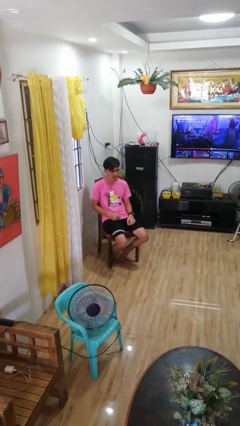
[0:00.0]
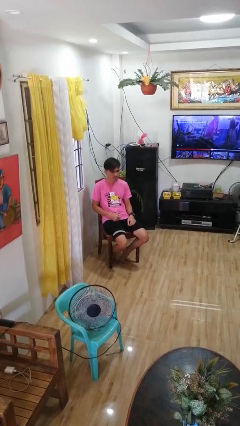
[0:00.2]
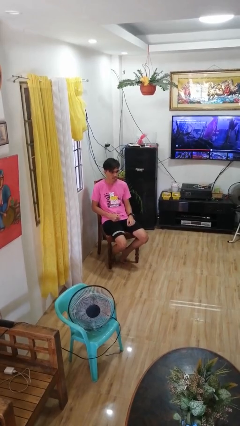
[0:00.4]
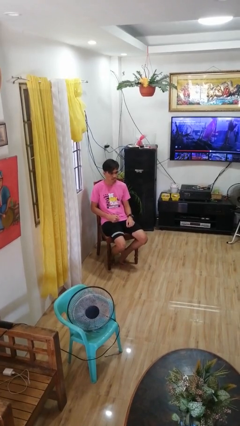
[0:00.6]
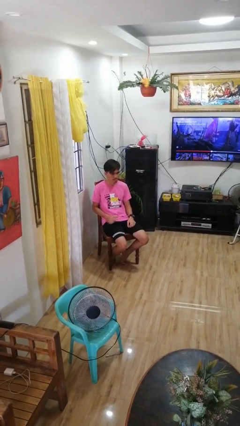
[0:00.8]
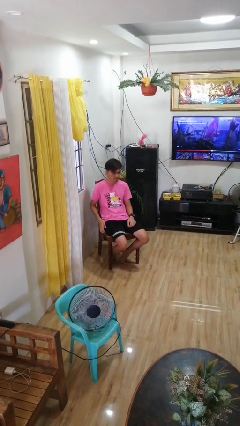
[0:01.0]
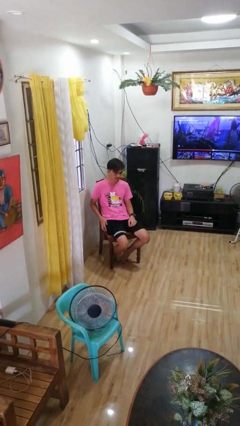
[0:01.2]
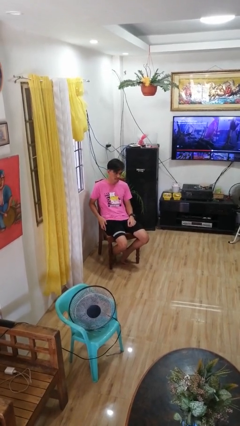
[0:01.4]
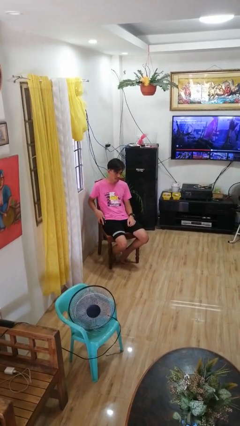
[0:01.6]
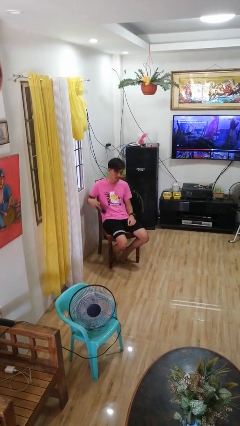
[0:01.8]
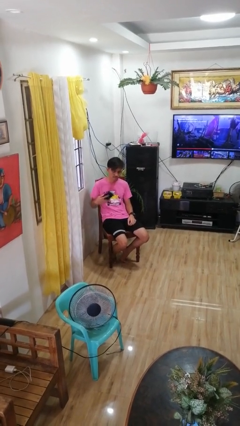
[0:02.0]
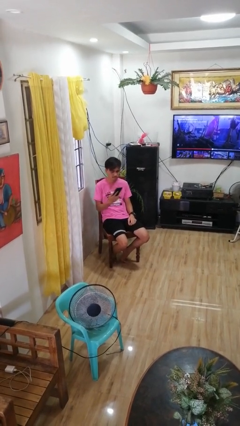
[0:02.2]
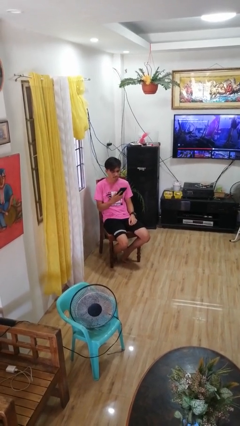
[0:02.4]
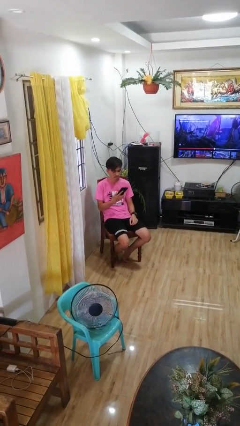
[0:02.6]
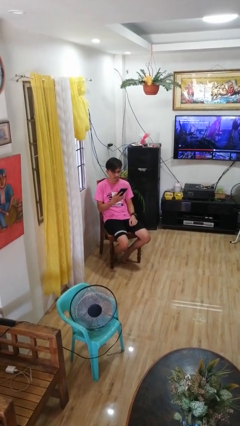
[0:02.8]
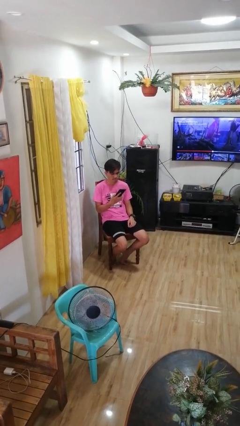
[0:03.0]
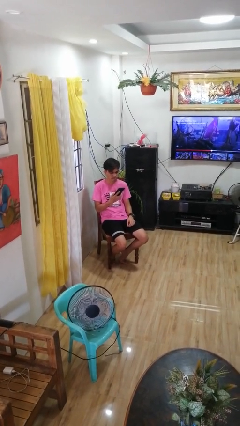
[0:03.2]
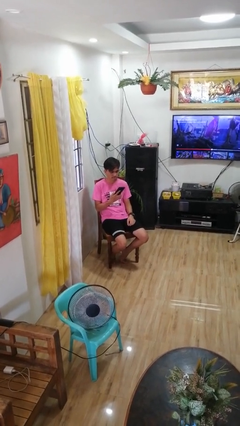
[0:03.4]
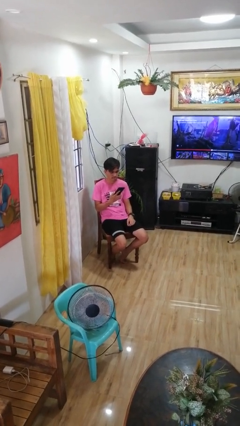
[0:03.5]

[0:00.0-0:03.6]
person takes phone from pocket

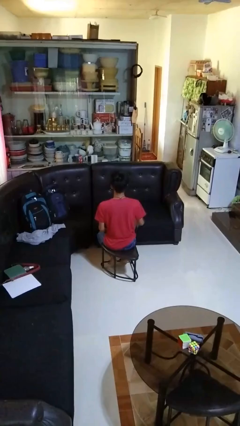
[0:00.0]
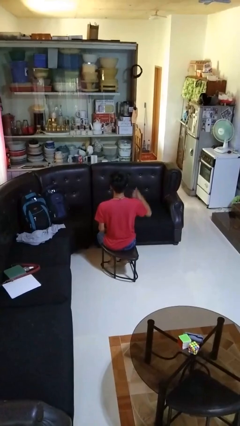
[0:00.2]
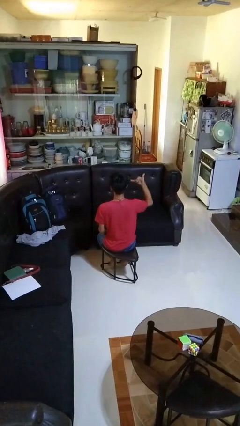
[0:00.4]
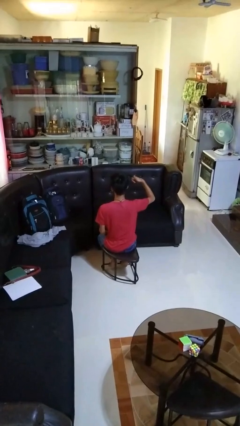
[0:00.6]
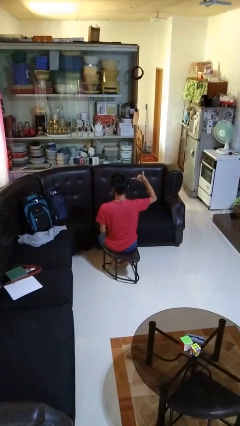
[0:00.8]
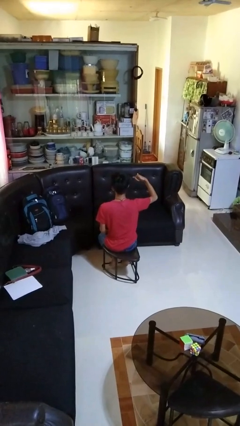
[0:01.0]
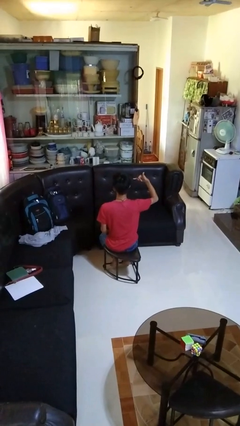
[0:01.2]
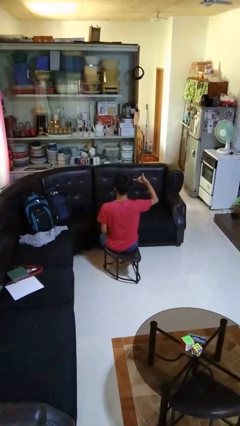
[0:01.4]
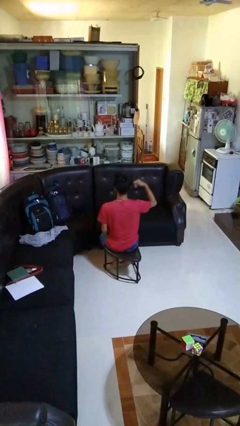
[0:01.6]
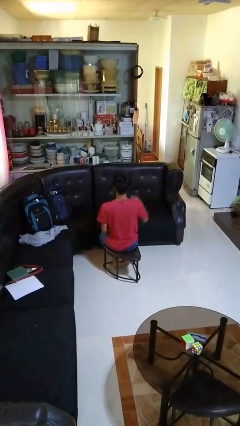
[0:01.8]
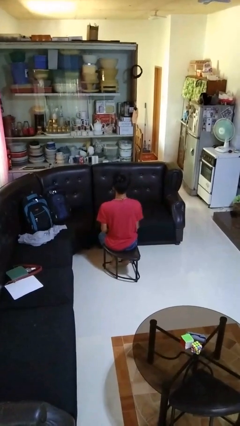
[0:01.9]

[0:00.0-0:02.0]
person gestures hang loose

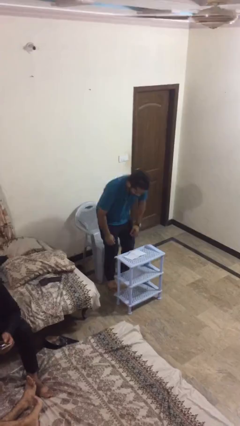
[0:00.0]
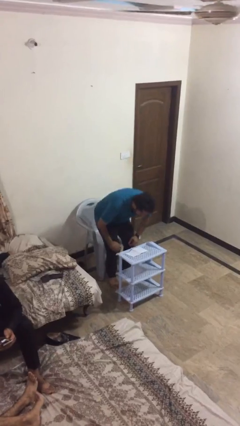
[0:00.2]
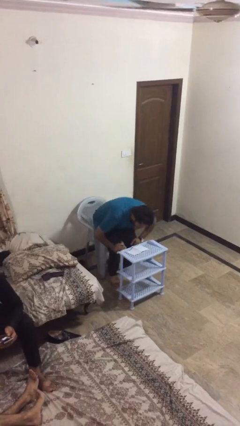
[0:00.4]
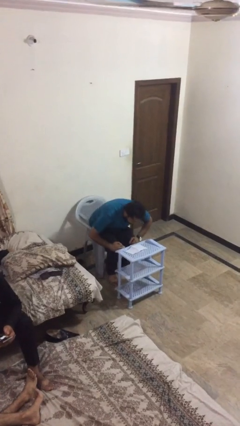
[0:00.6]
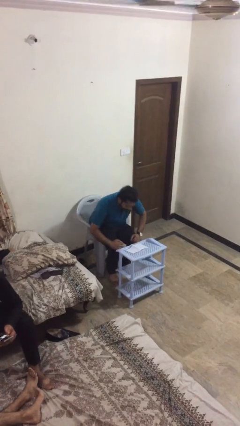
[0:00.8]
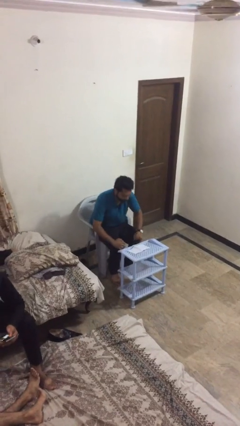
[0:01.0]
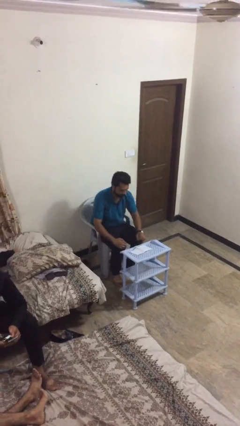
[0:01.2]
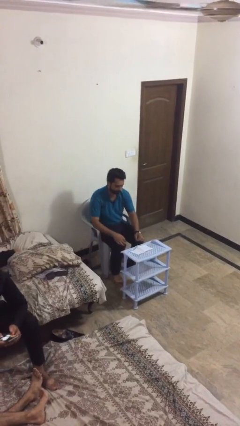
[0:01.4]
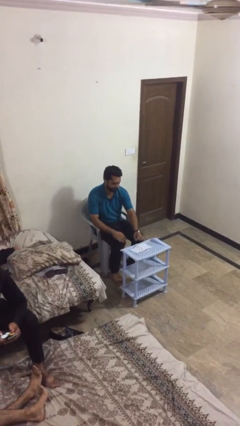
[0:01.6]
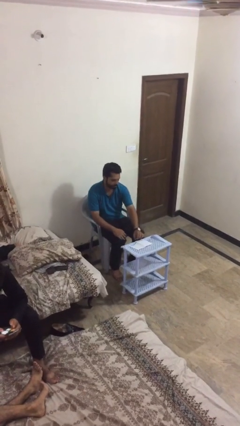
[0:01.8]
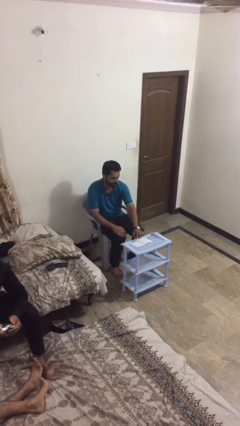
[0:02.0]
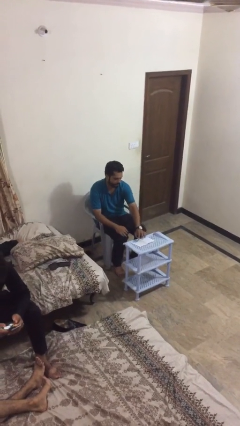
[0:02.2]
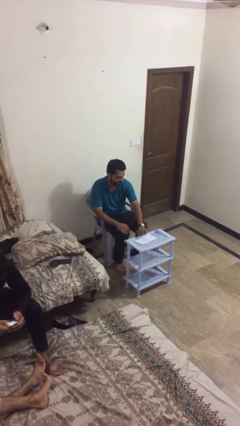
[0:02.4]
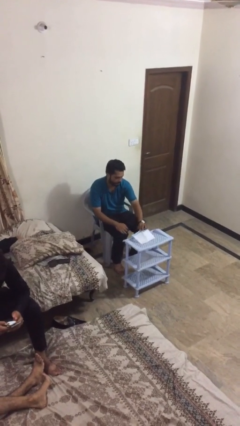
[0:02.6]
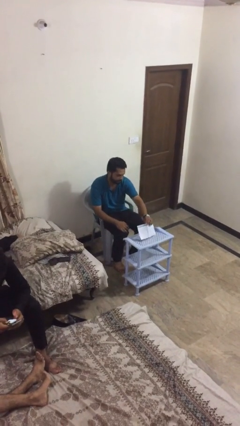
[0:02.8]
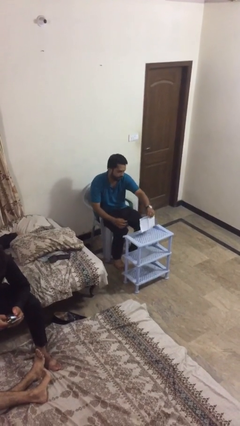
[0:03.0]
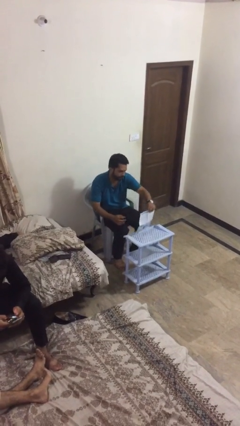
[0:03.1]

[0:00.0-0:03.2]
person sits down

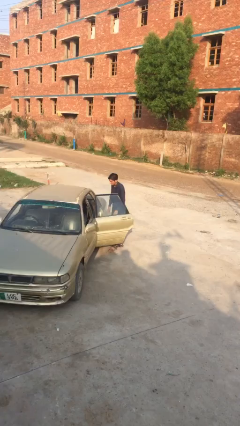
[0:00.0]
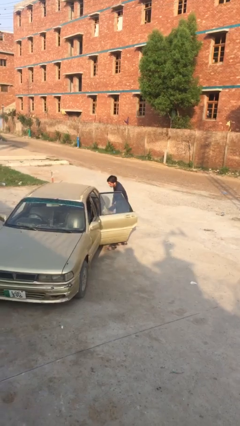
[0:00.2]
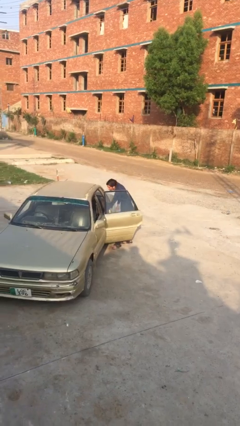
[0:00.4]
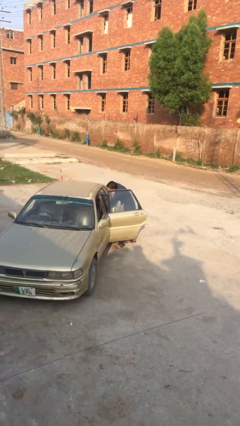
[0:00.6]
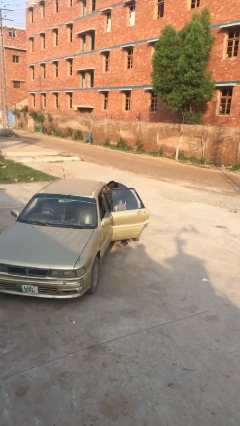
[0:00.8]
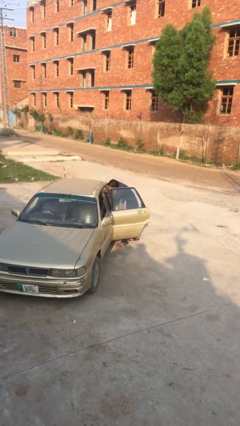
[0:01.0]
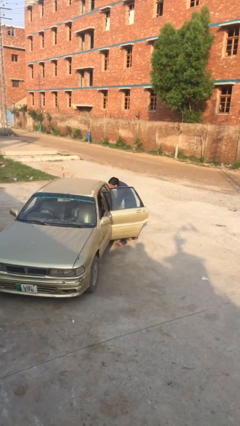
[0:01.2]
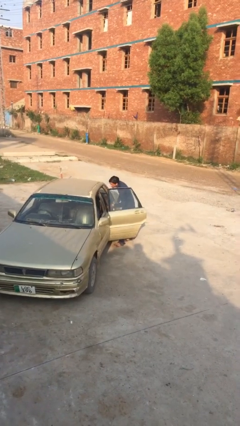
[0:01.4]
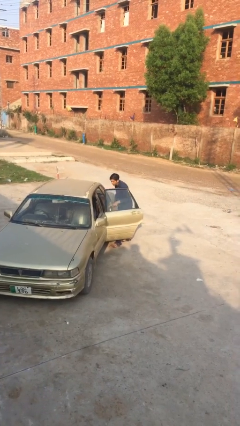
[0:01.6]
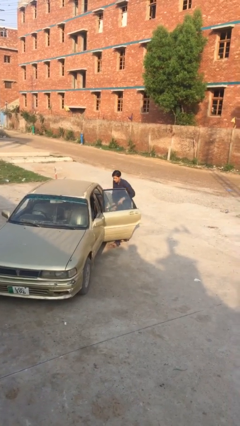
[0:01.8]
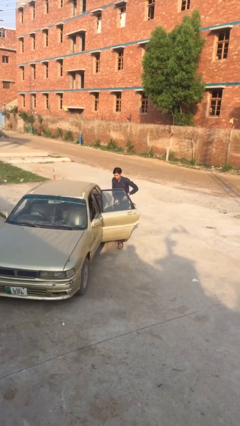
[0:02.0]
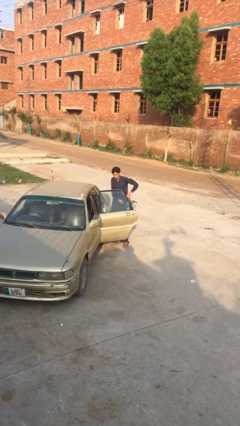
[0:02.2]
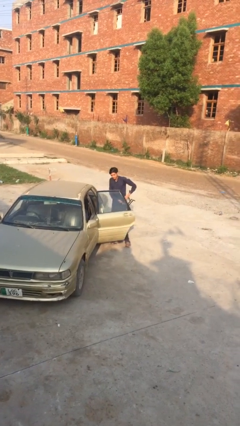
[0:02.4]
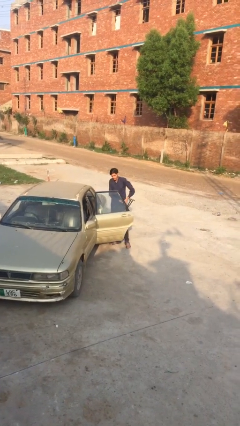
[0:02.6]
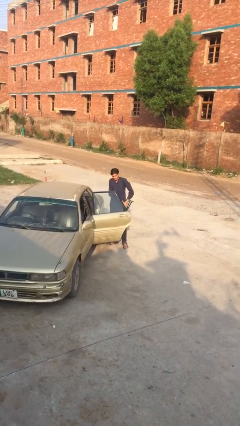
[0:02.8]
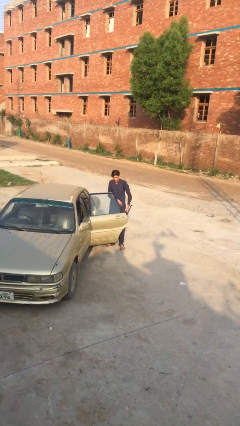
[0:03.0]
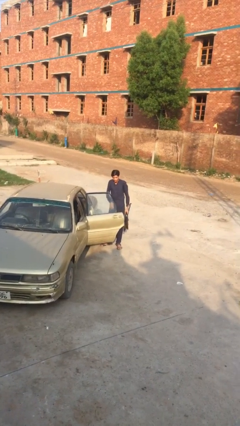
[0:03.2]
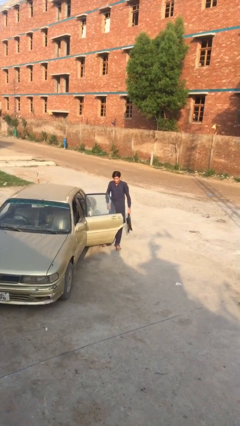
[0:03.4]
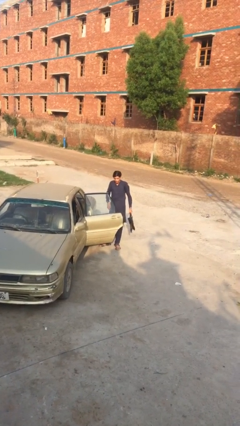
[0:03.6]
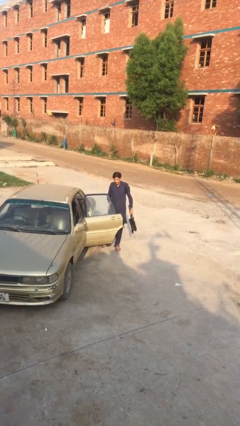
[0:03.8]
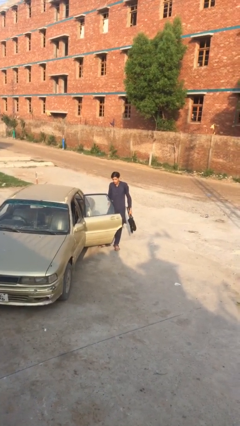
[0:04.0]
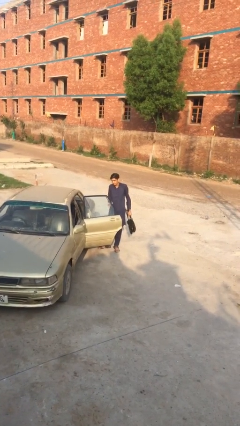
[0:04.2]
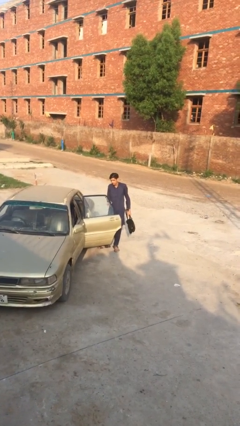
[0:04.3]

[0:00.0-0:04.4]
person unloads car

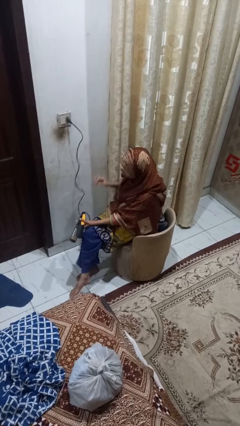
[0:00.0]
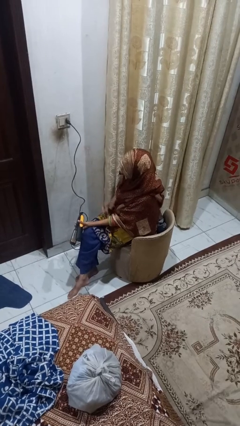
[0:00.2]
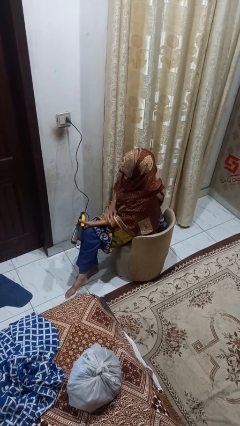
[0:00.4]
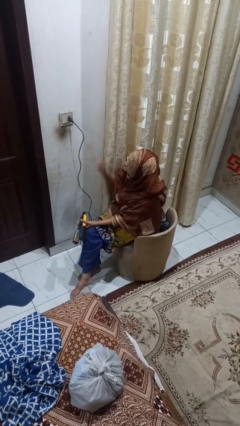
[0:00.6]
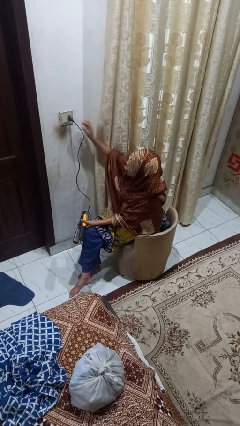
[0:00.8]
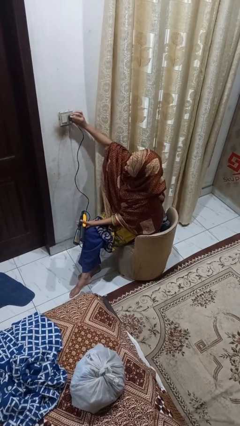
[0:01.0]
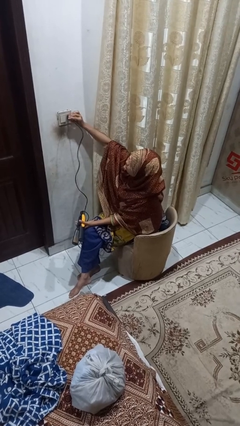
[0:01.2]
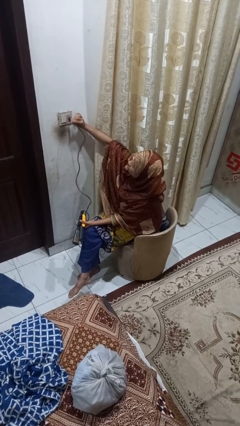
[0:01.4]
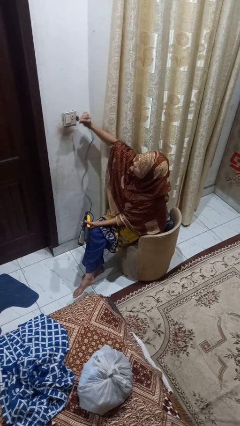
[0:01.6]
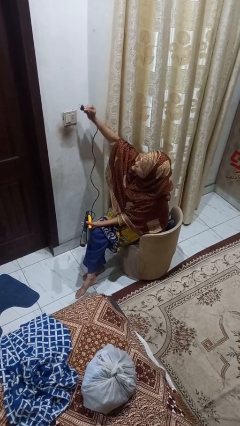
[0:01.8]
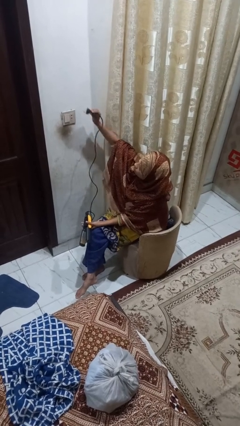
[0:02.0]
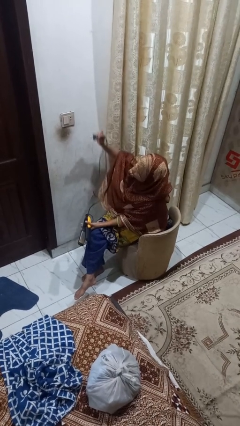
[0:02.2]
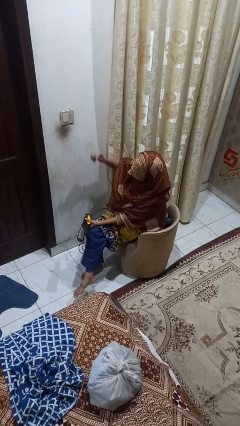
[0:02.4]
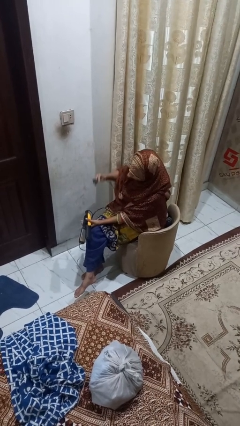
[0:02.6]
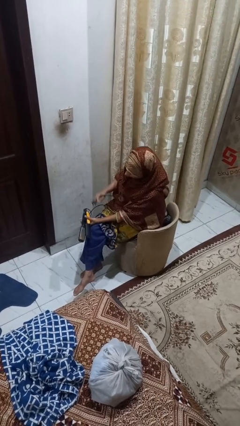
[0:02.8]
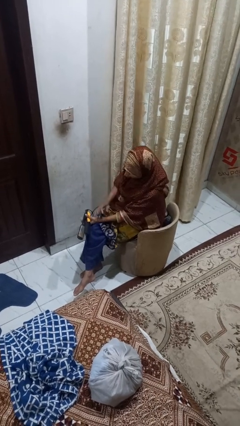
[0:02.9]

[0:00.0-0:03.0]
person unplugs from electrical socket

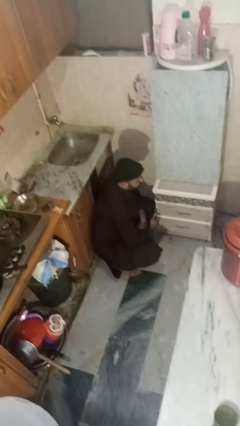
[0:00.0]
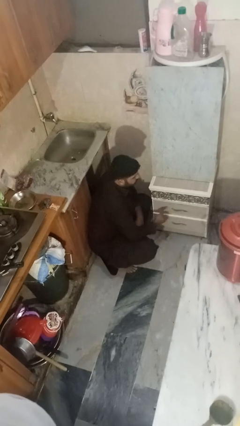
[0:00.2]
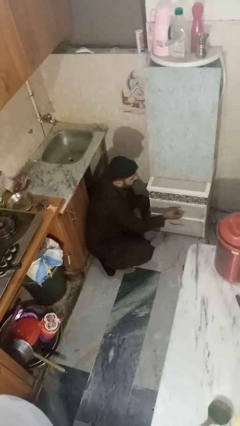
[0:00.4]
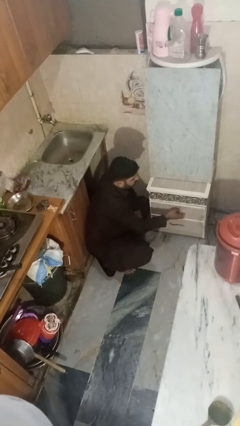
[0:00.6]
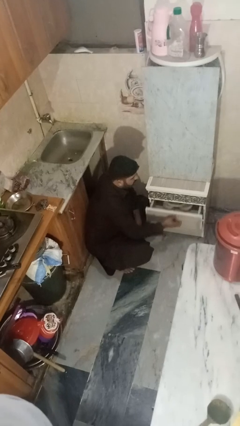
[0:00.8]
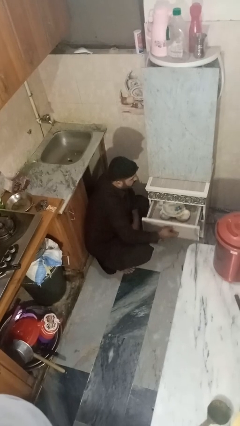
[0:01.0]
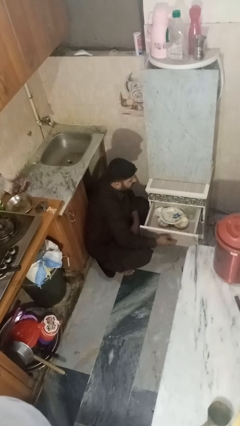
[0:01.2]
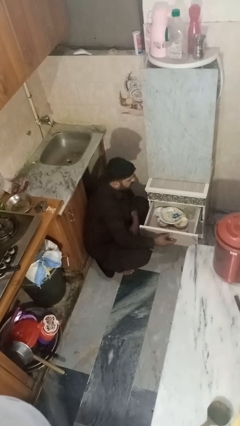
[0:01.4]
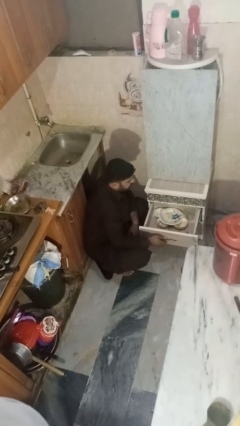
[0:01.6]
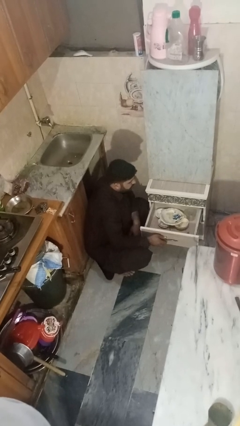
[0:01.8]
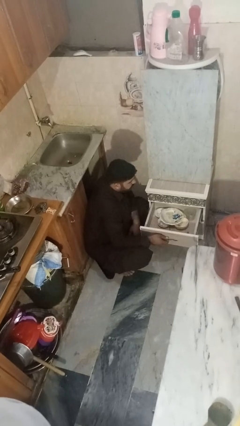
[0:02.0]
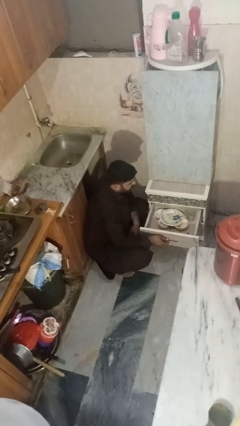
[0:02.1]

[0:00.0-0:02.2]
person opens kitchen drawer
